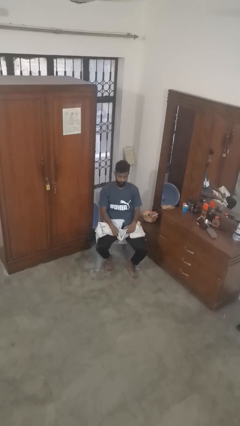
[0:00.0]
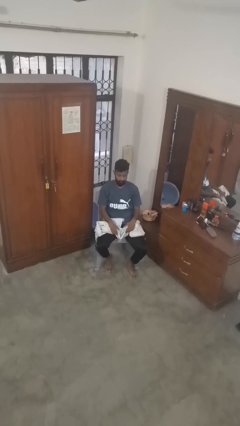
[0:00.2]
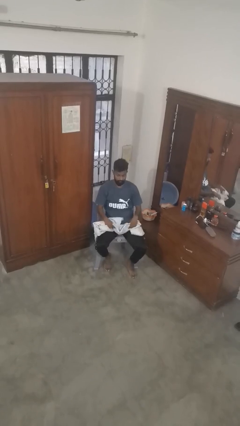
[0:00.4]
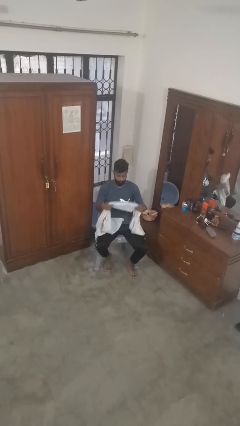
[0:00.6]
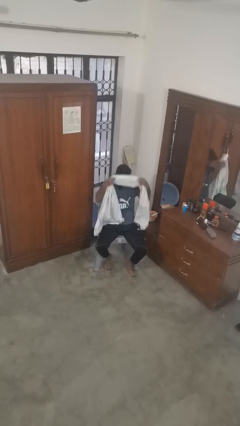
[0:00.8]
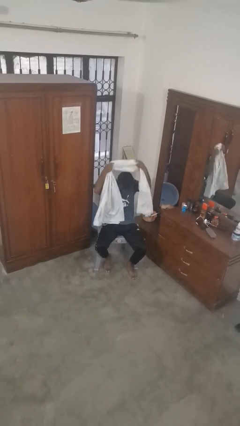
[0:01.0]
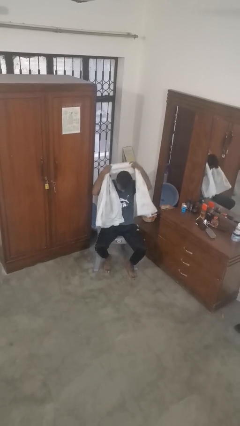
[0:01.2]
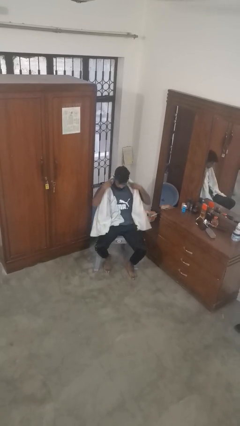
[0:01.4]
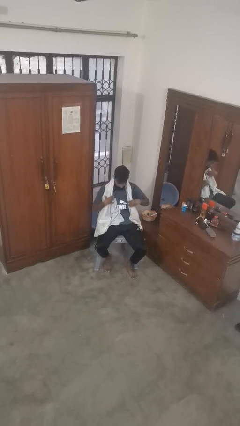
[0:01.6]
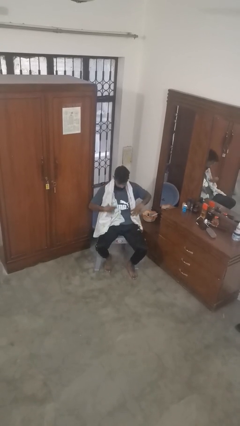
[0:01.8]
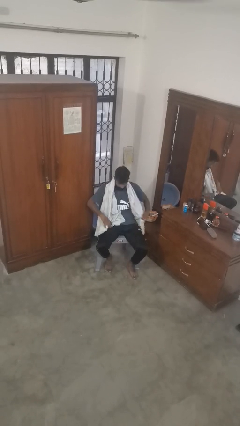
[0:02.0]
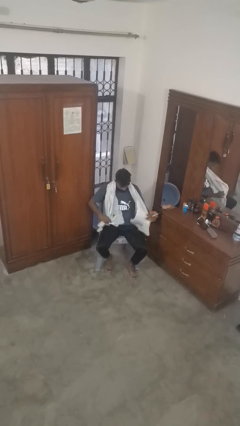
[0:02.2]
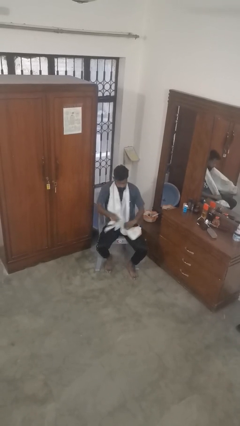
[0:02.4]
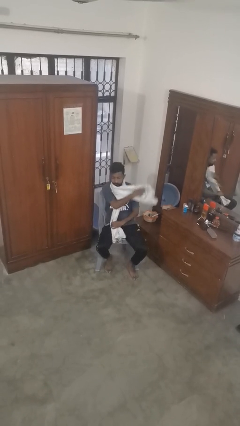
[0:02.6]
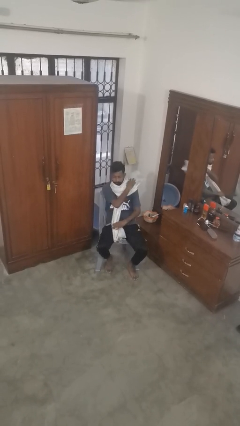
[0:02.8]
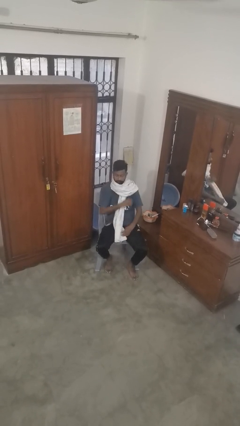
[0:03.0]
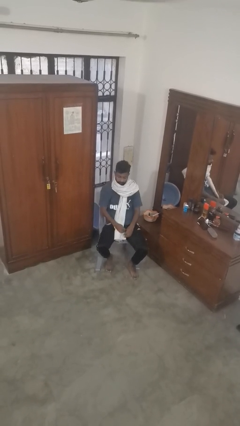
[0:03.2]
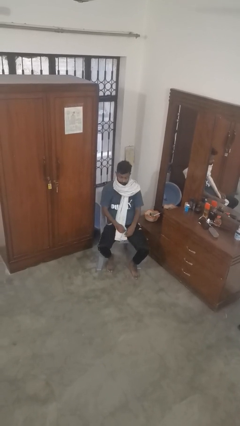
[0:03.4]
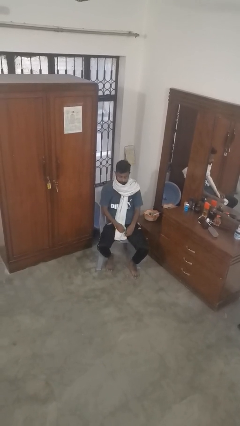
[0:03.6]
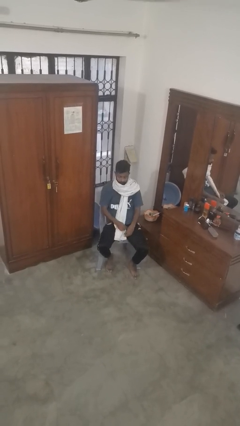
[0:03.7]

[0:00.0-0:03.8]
person puts on scarf

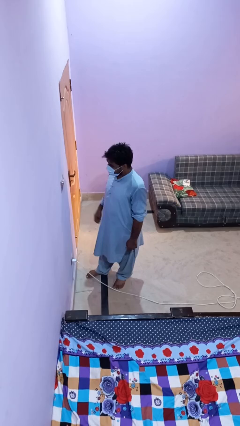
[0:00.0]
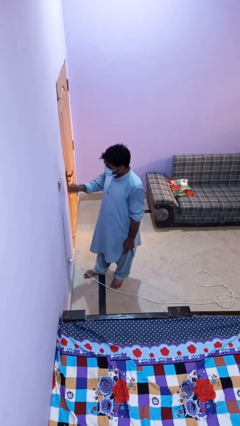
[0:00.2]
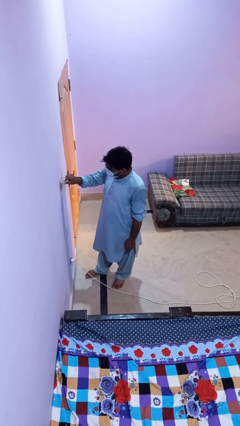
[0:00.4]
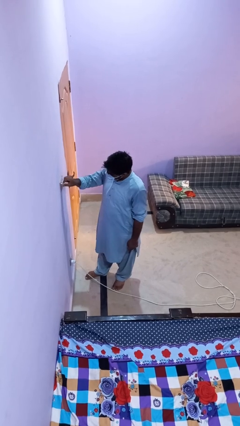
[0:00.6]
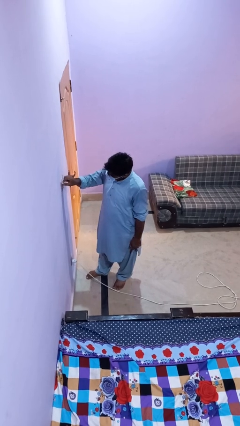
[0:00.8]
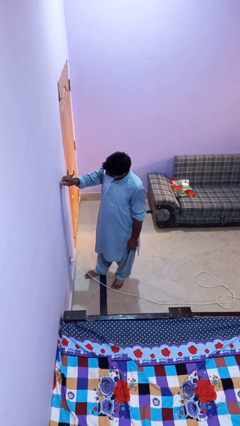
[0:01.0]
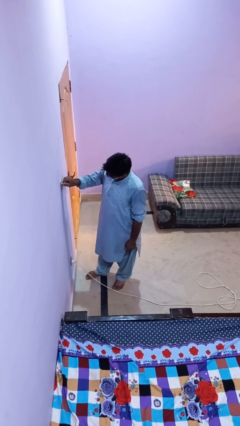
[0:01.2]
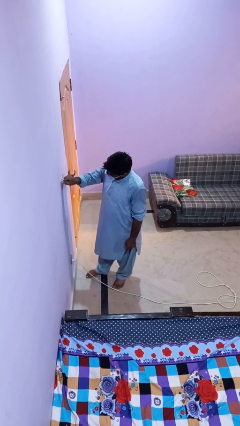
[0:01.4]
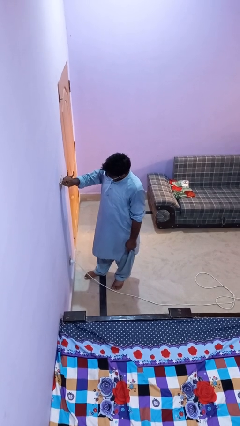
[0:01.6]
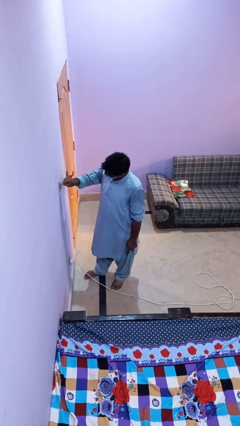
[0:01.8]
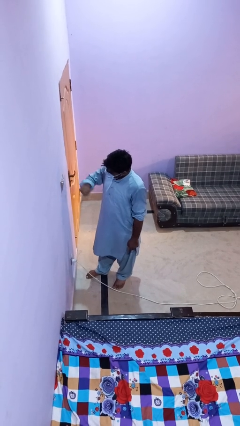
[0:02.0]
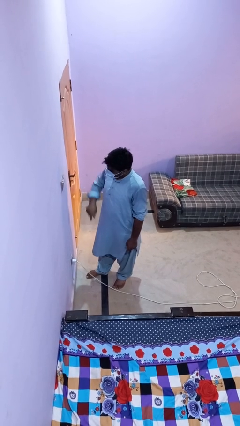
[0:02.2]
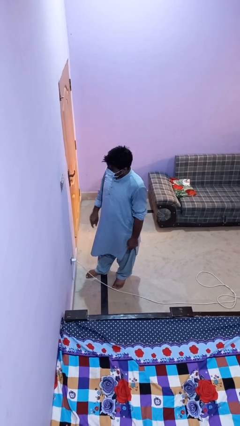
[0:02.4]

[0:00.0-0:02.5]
person adjusts thermostat

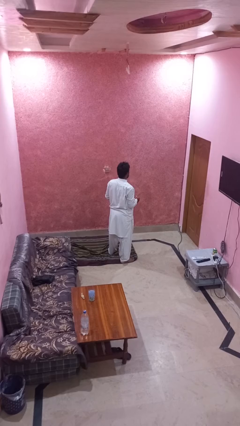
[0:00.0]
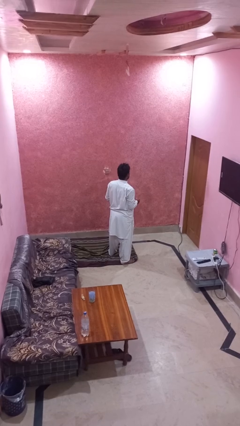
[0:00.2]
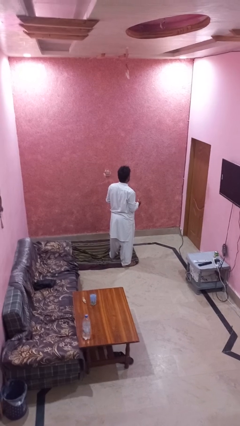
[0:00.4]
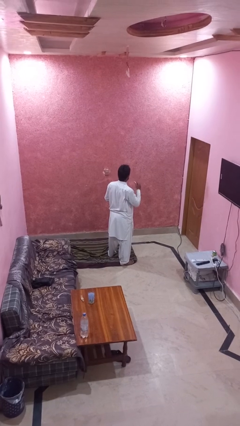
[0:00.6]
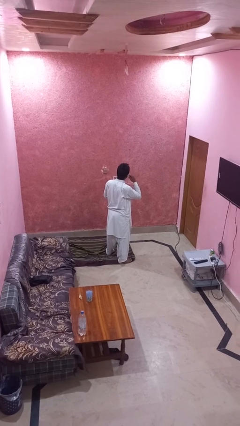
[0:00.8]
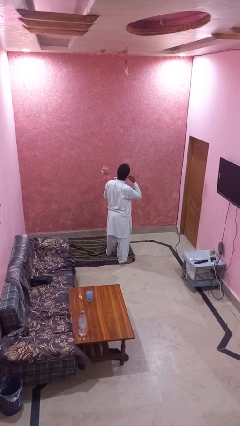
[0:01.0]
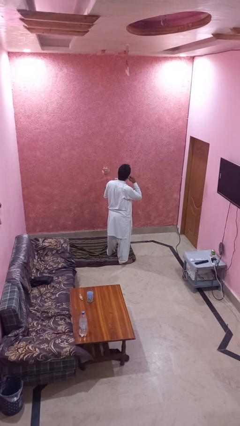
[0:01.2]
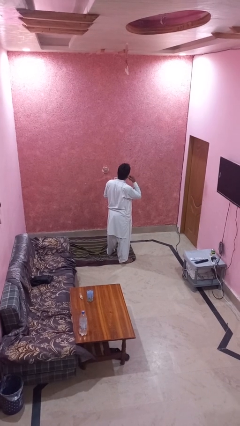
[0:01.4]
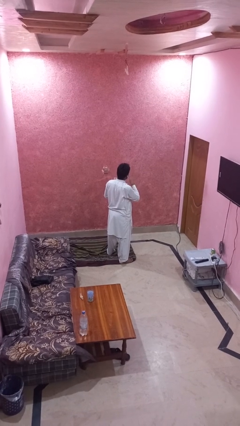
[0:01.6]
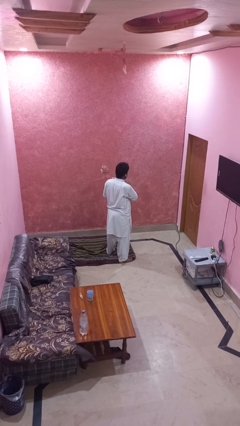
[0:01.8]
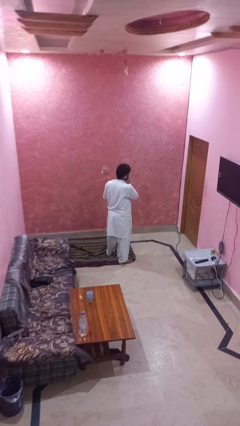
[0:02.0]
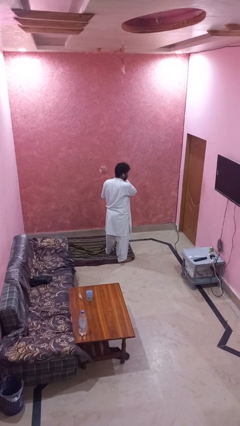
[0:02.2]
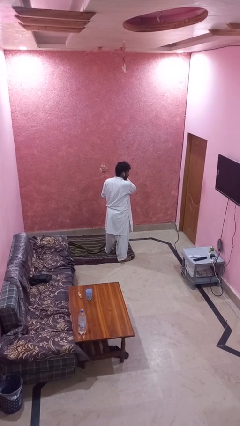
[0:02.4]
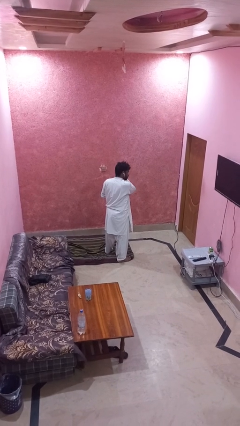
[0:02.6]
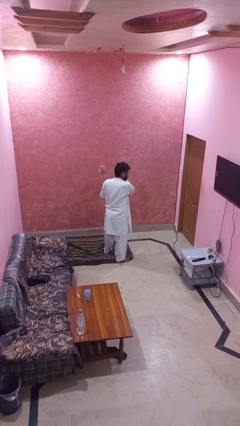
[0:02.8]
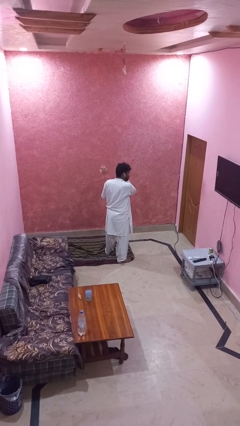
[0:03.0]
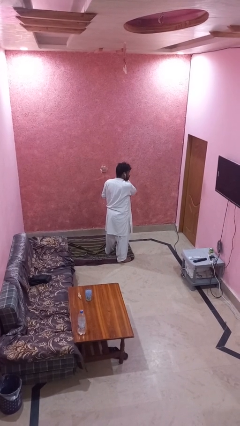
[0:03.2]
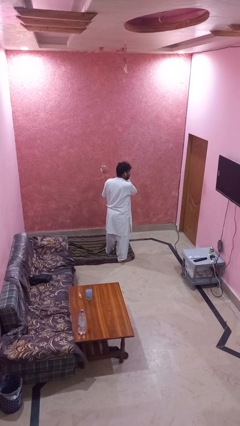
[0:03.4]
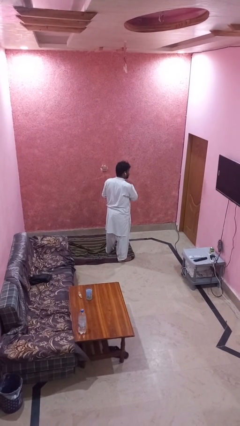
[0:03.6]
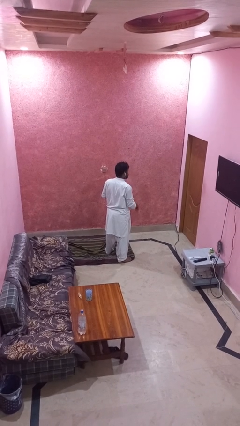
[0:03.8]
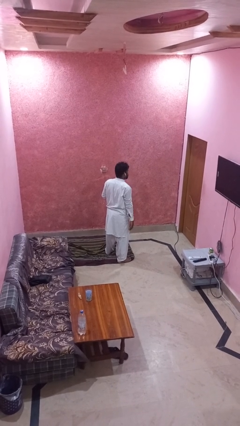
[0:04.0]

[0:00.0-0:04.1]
person puts on headphones

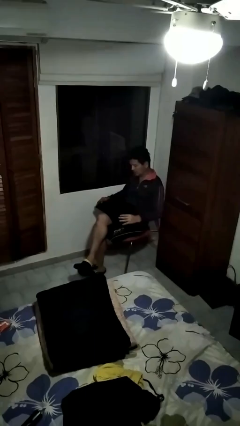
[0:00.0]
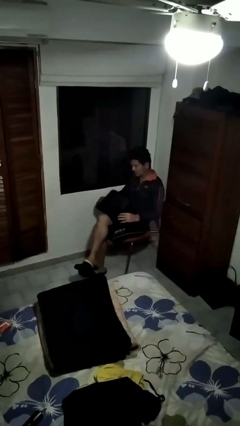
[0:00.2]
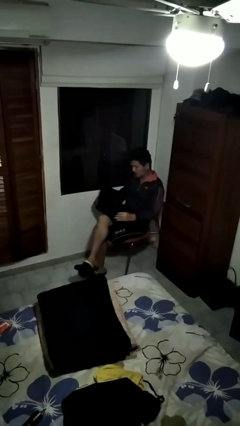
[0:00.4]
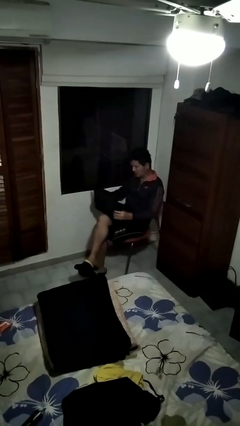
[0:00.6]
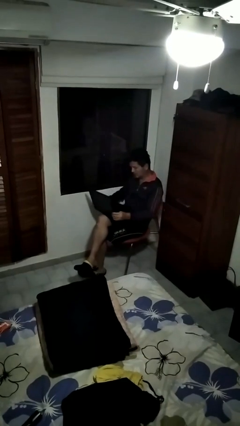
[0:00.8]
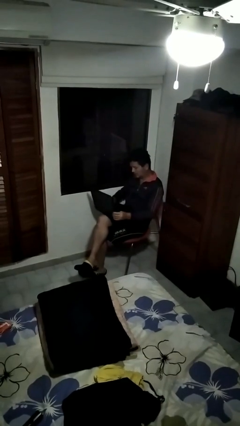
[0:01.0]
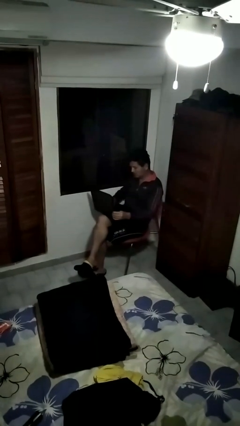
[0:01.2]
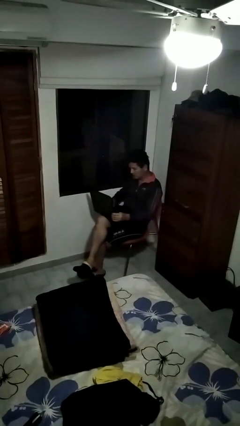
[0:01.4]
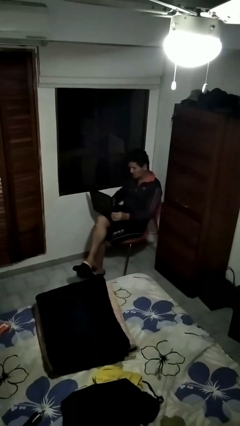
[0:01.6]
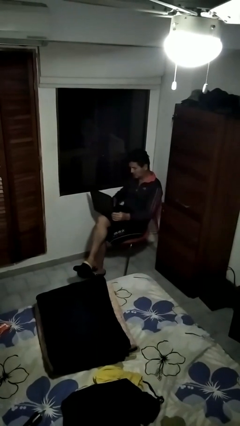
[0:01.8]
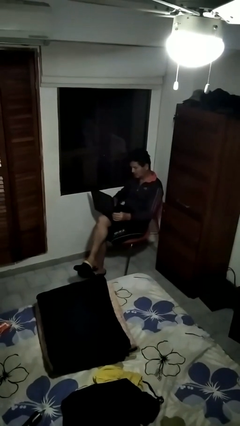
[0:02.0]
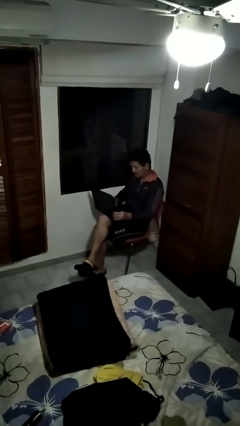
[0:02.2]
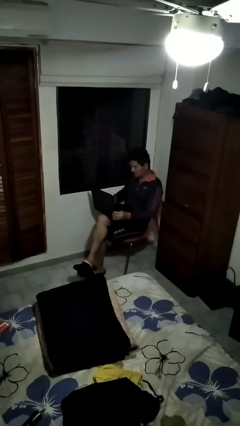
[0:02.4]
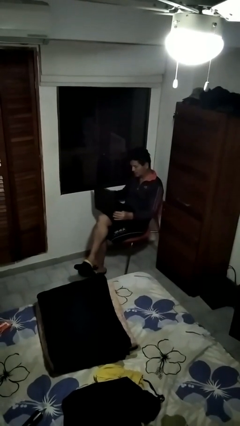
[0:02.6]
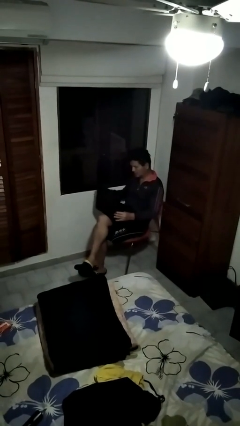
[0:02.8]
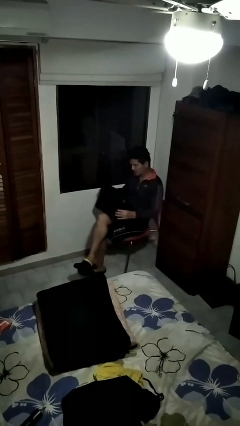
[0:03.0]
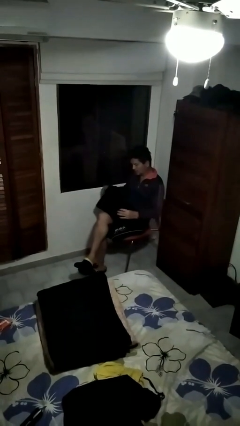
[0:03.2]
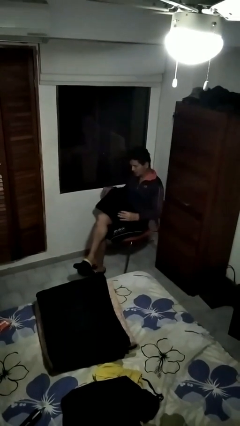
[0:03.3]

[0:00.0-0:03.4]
person interacts with laptop

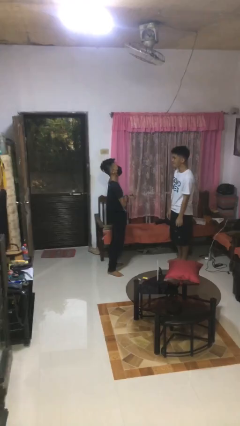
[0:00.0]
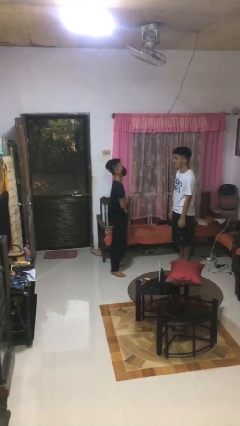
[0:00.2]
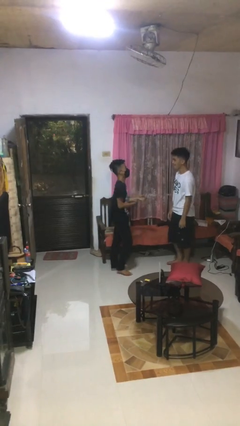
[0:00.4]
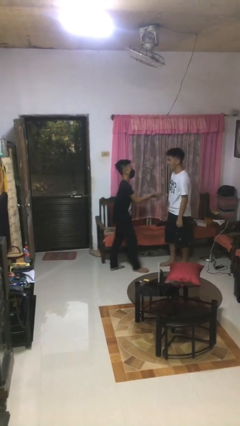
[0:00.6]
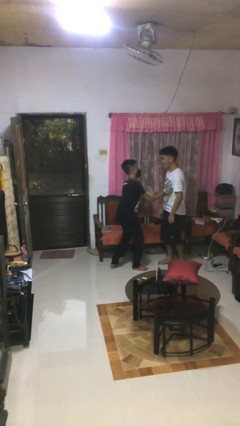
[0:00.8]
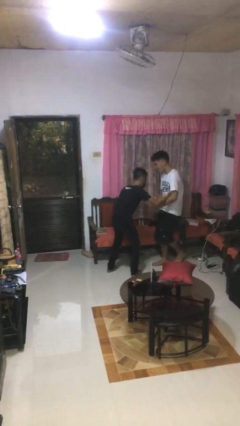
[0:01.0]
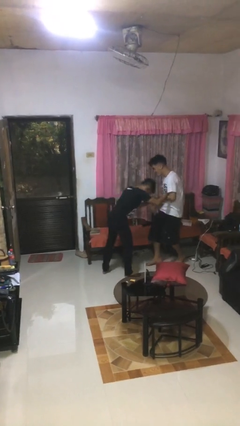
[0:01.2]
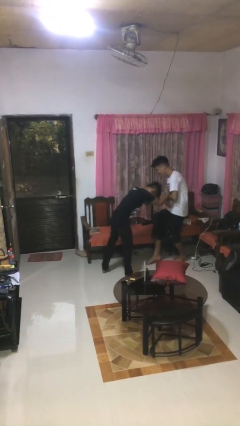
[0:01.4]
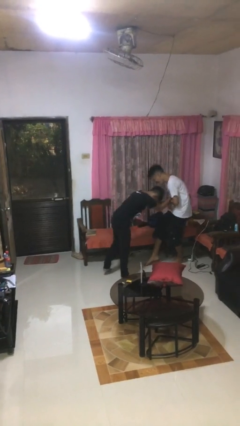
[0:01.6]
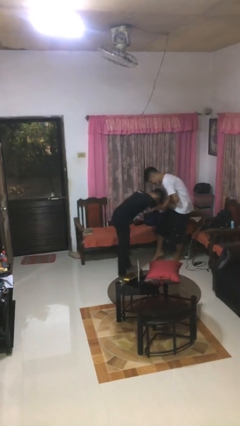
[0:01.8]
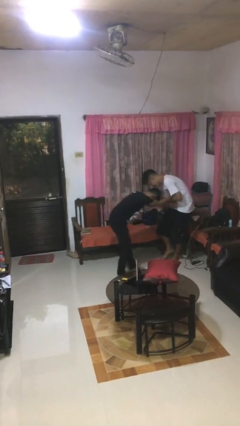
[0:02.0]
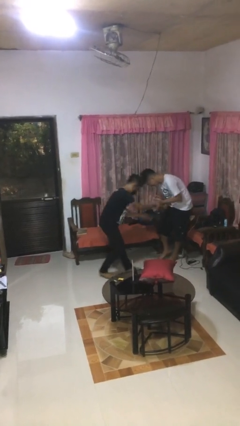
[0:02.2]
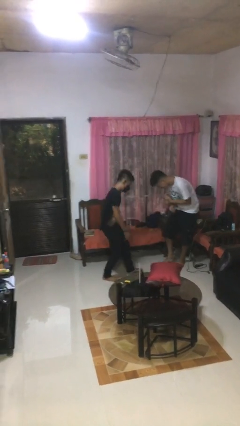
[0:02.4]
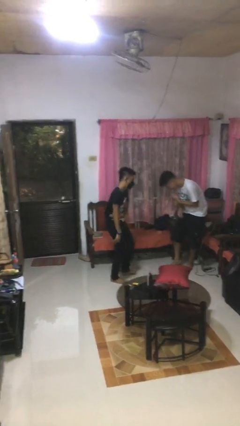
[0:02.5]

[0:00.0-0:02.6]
person tickles person

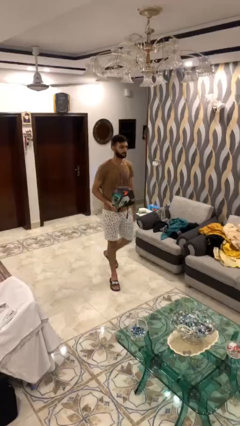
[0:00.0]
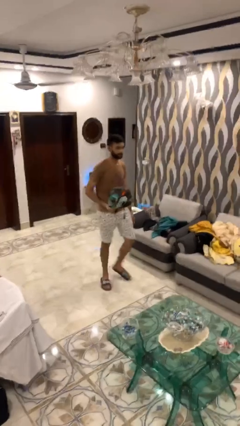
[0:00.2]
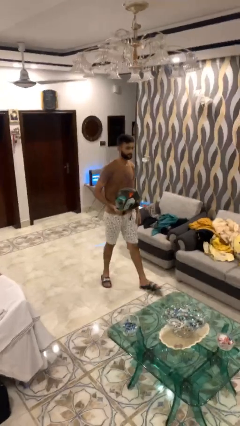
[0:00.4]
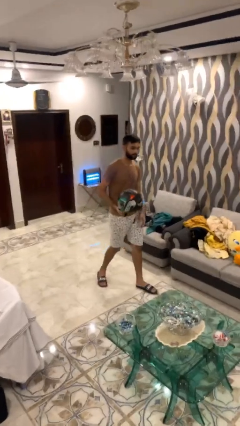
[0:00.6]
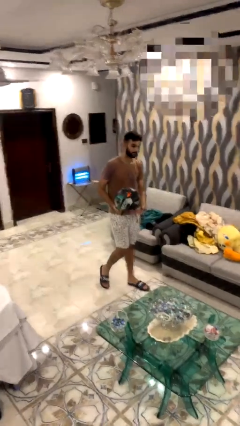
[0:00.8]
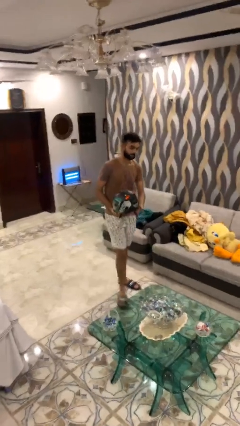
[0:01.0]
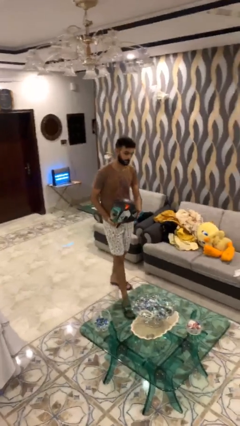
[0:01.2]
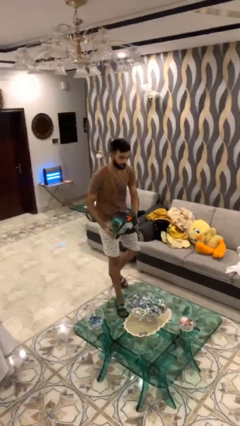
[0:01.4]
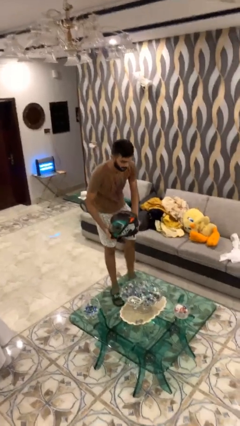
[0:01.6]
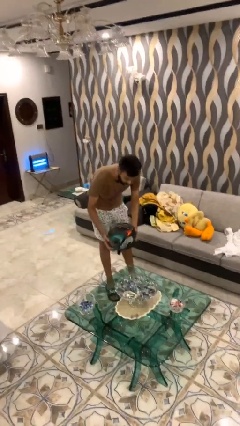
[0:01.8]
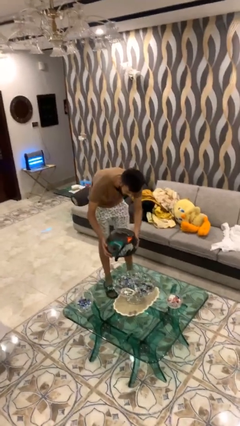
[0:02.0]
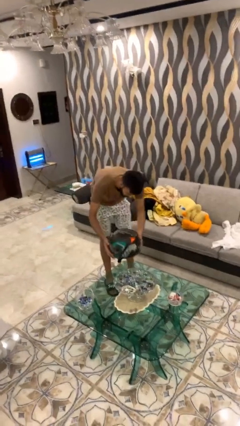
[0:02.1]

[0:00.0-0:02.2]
person puts down object on table
